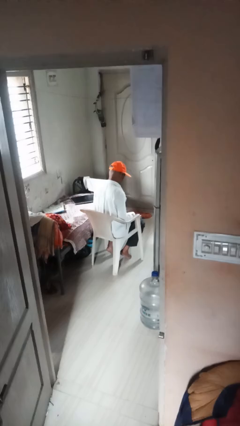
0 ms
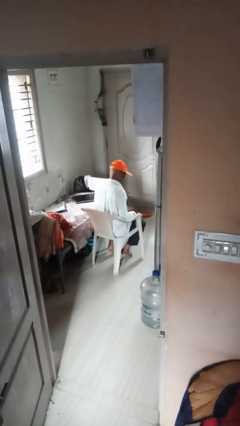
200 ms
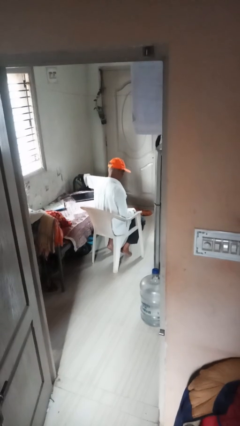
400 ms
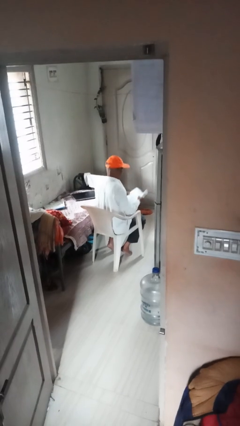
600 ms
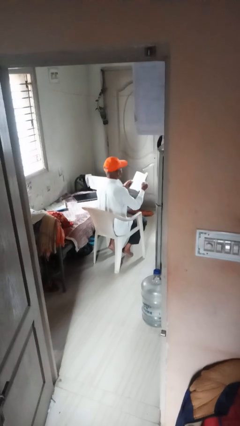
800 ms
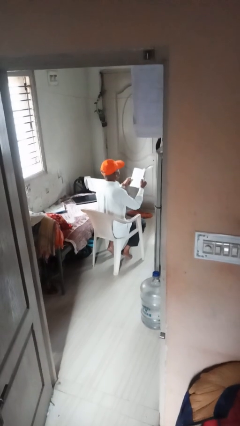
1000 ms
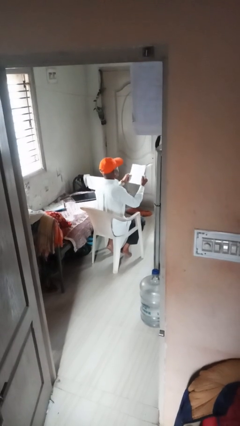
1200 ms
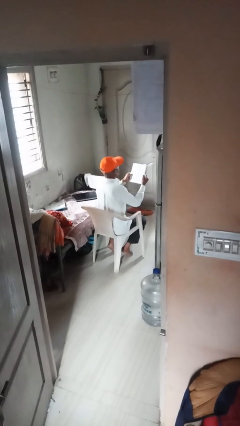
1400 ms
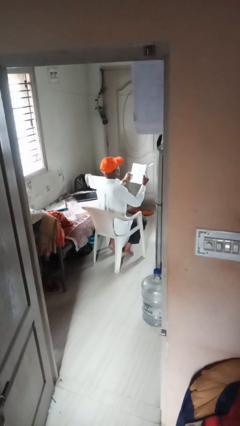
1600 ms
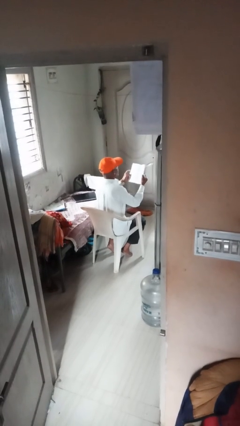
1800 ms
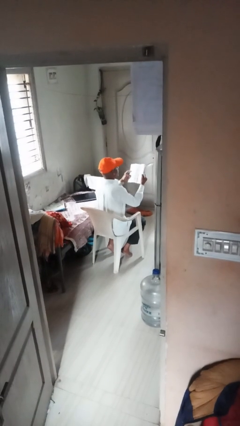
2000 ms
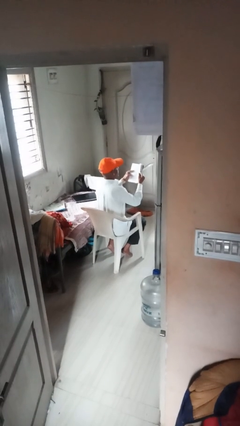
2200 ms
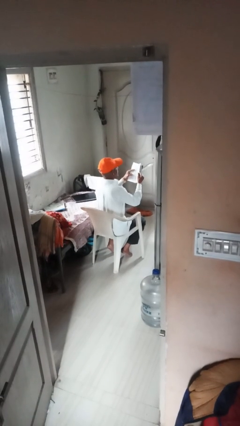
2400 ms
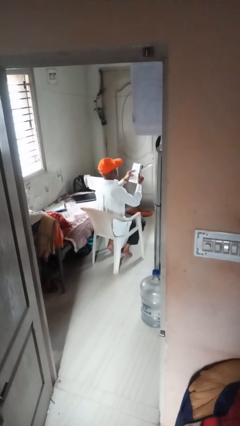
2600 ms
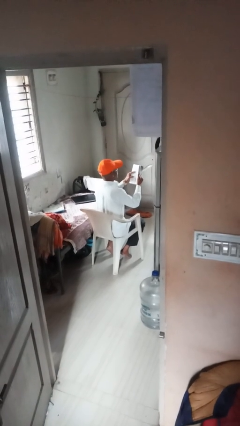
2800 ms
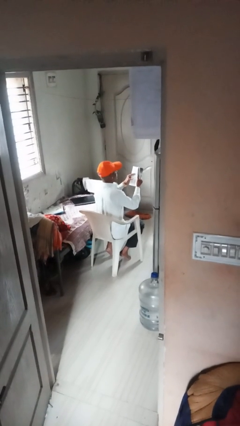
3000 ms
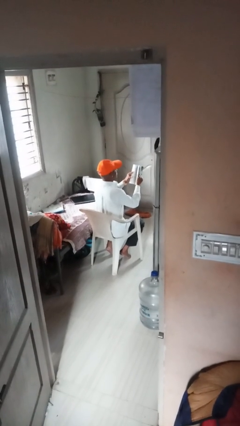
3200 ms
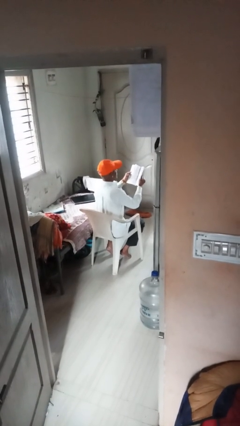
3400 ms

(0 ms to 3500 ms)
person reads book

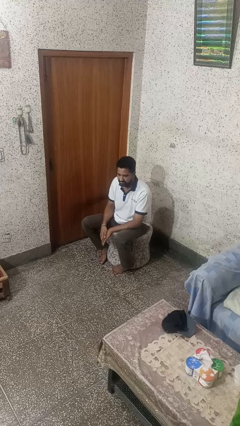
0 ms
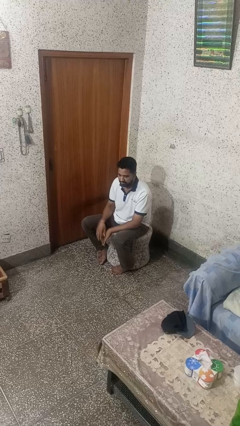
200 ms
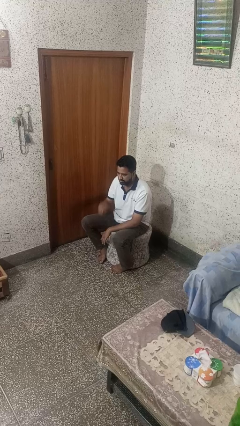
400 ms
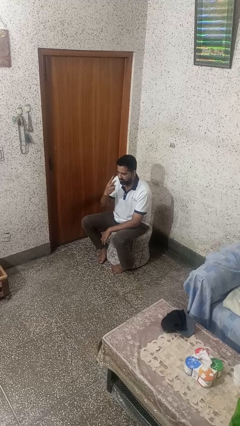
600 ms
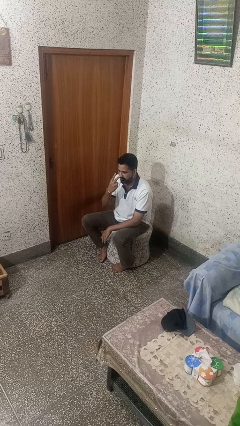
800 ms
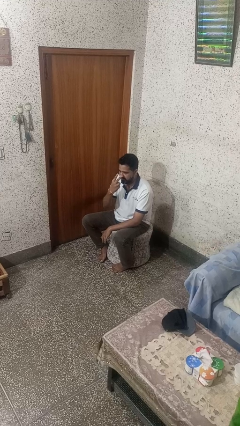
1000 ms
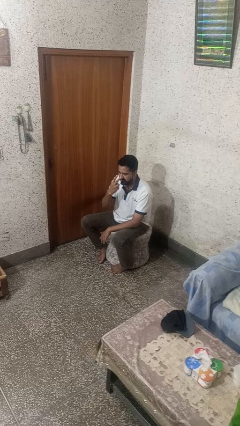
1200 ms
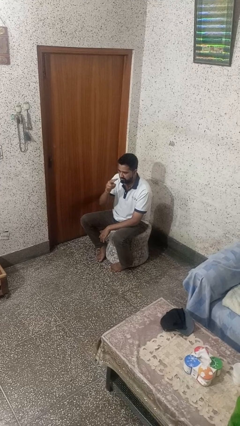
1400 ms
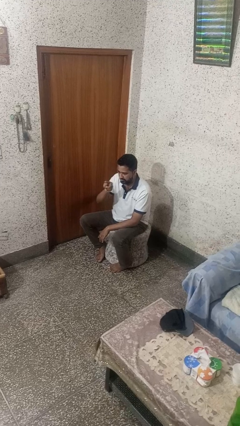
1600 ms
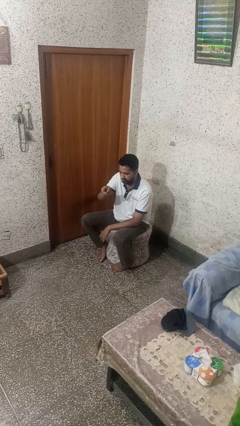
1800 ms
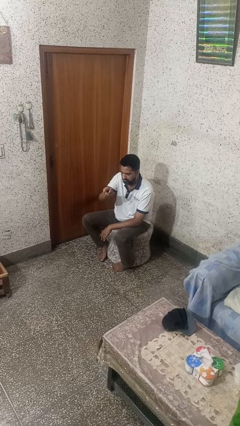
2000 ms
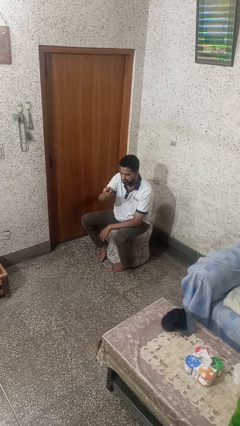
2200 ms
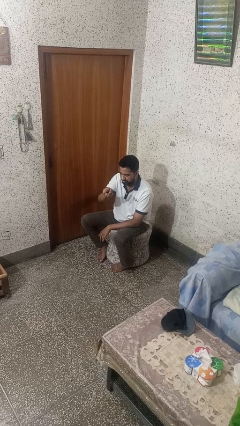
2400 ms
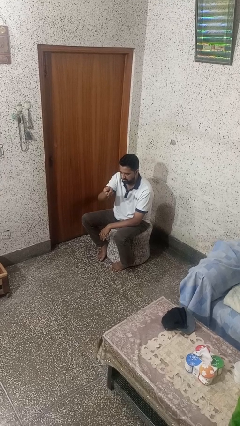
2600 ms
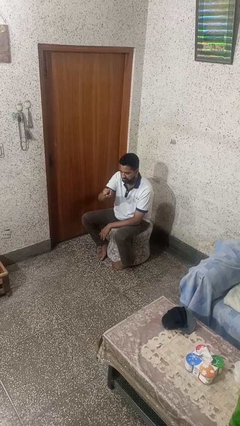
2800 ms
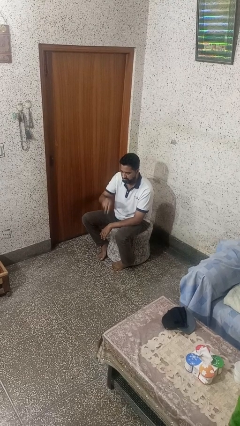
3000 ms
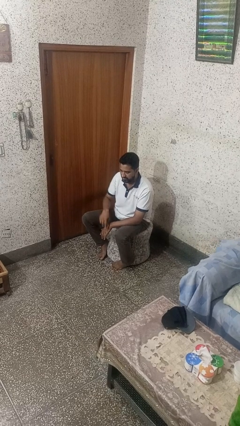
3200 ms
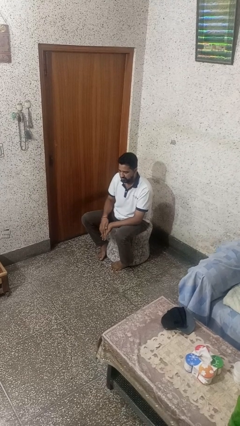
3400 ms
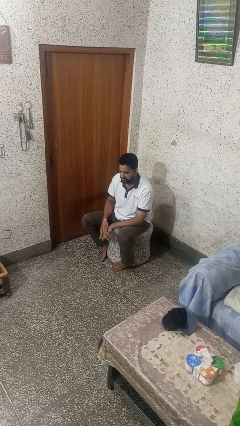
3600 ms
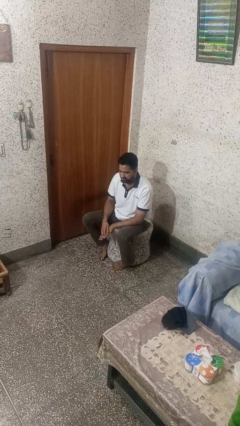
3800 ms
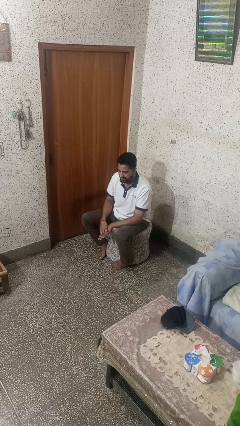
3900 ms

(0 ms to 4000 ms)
person gestures watch closely

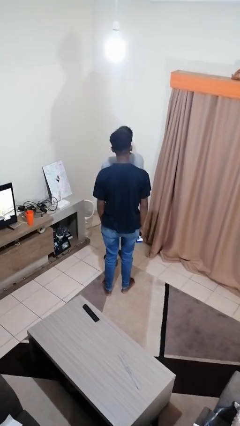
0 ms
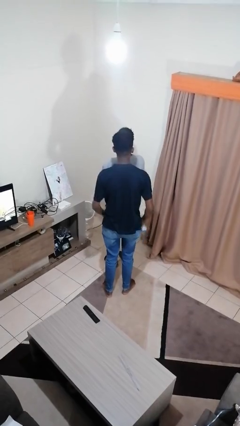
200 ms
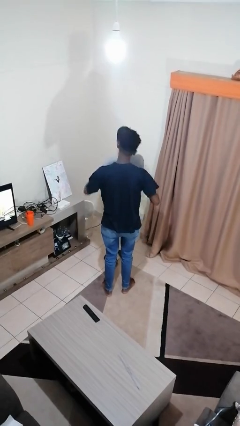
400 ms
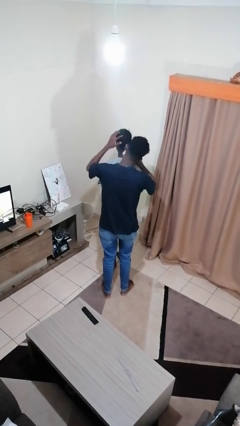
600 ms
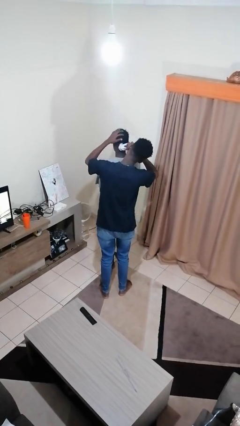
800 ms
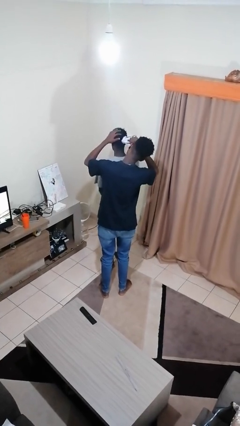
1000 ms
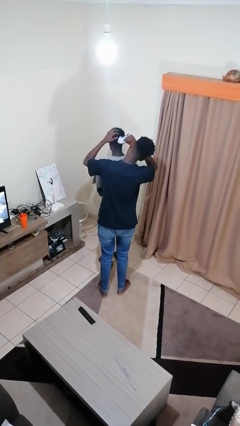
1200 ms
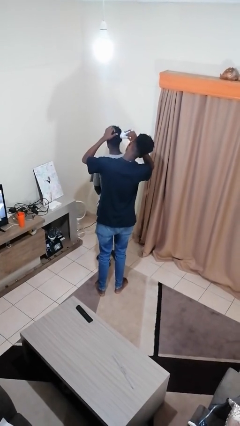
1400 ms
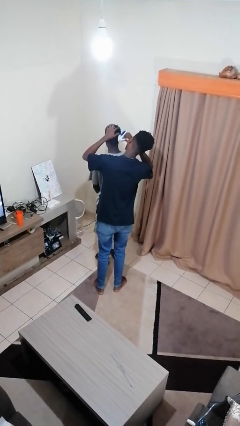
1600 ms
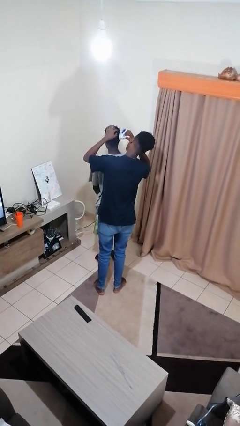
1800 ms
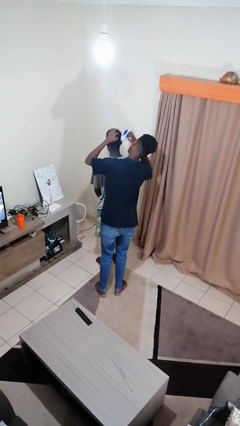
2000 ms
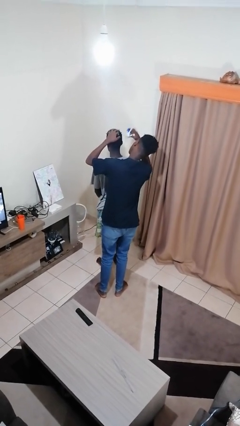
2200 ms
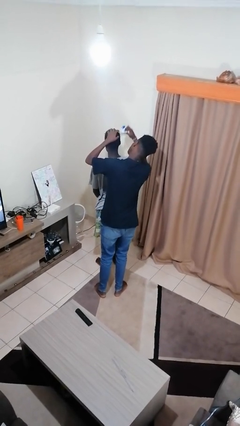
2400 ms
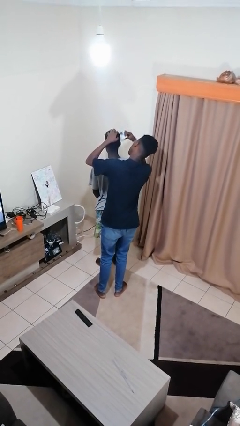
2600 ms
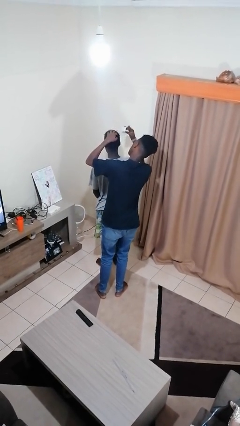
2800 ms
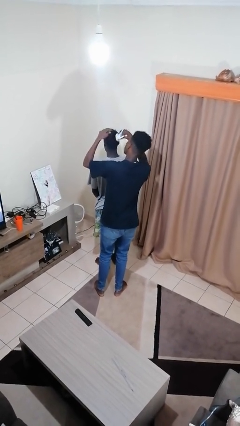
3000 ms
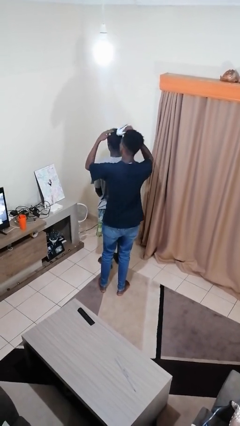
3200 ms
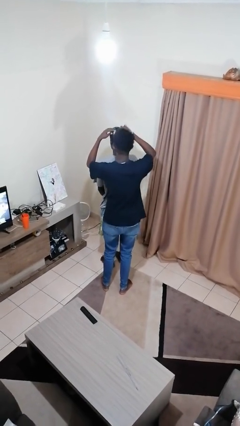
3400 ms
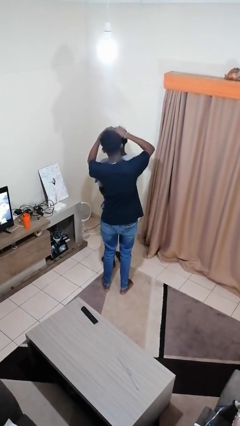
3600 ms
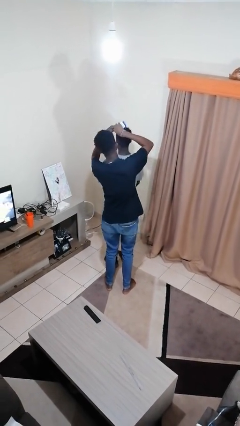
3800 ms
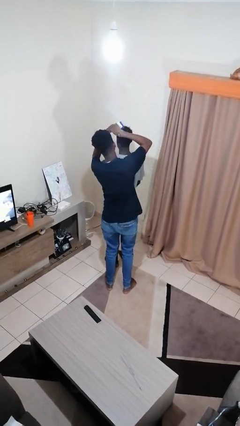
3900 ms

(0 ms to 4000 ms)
person brushes hair of person

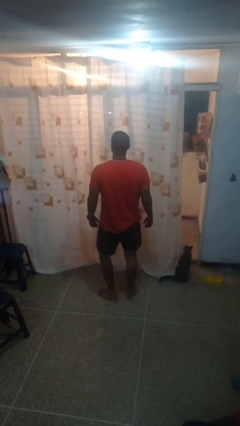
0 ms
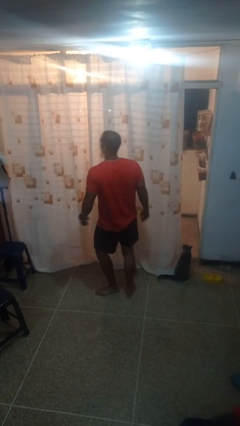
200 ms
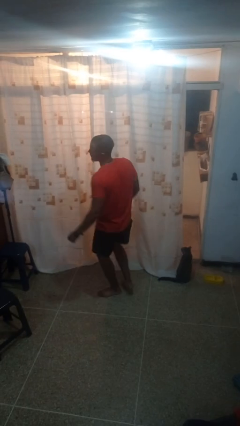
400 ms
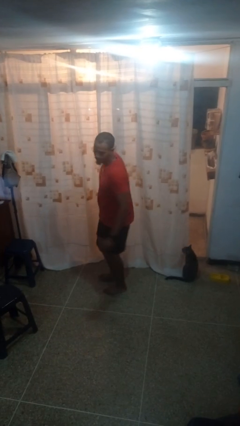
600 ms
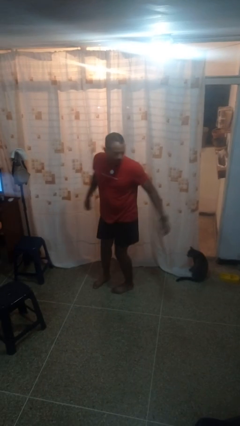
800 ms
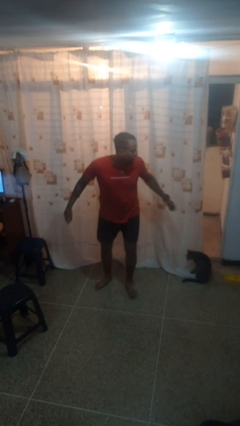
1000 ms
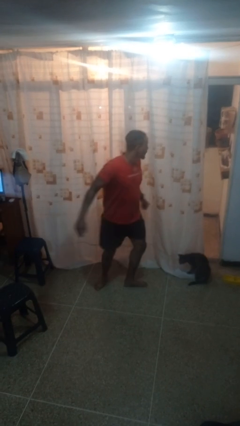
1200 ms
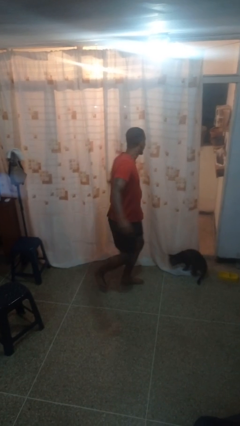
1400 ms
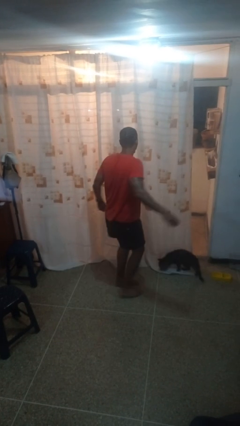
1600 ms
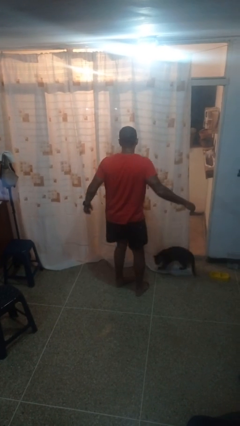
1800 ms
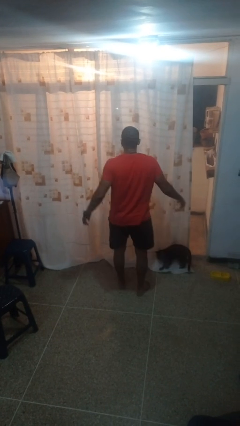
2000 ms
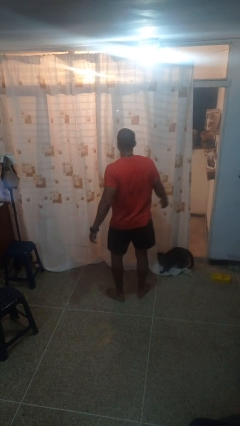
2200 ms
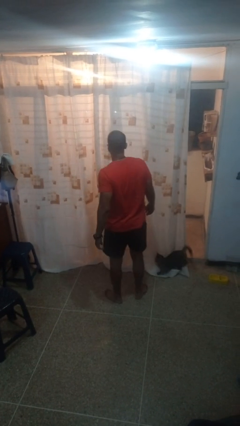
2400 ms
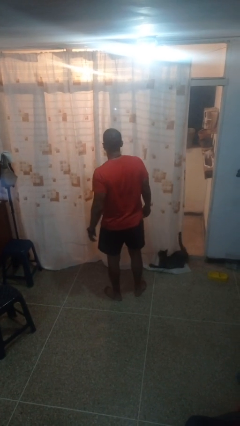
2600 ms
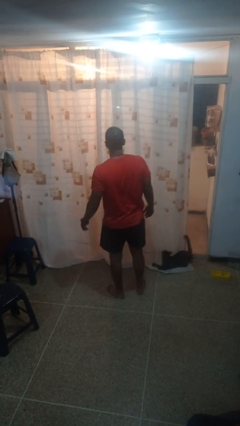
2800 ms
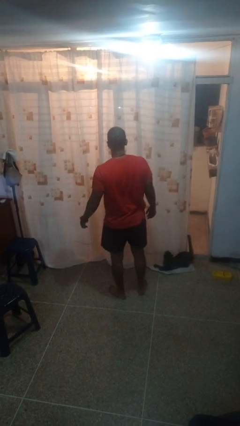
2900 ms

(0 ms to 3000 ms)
person twirls

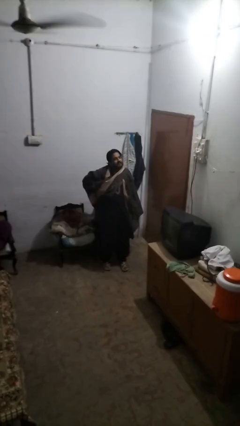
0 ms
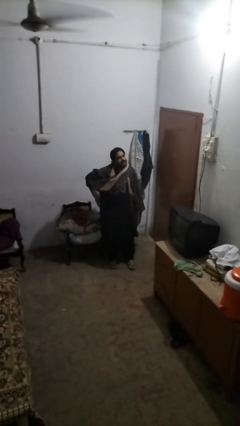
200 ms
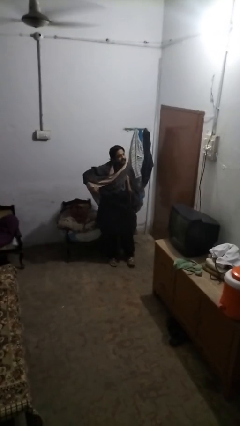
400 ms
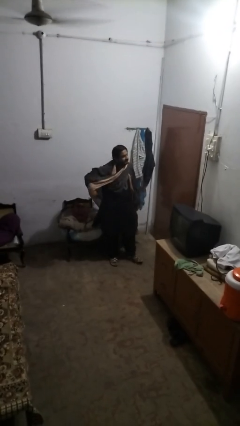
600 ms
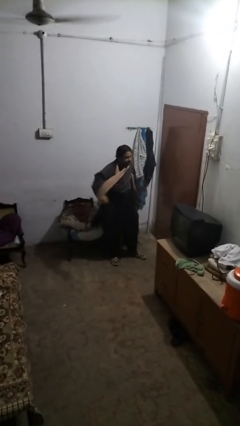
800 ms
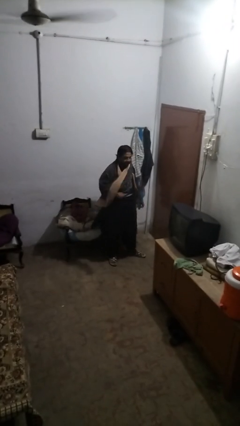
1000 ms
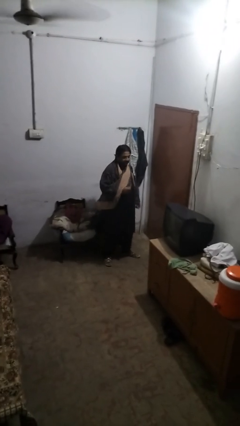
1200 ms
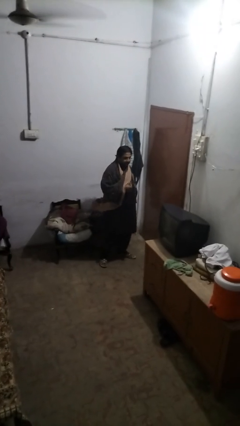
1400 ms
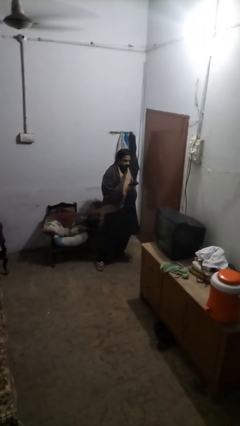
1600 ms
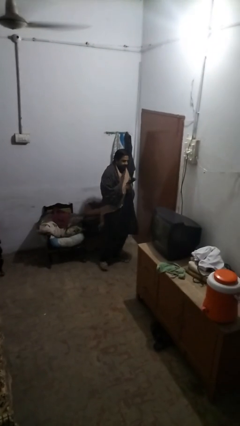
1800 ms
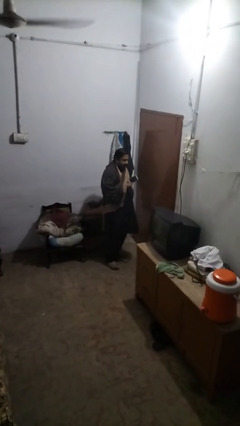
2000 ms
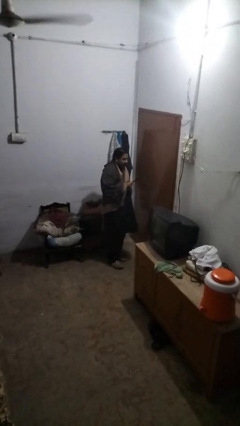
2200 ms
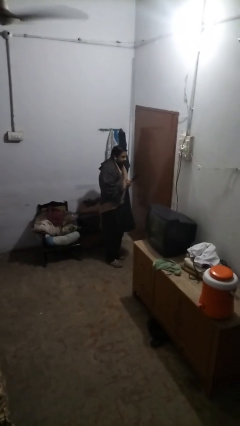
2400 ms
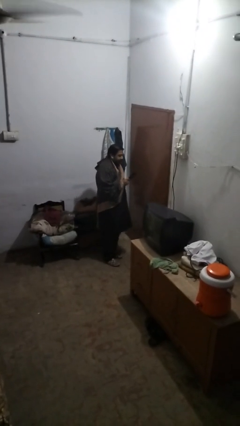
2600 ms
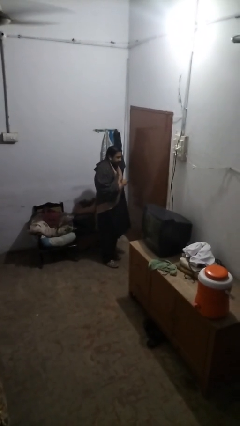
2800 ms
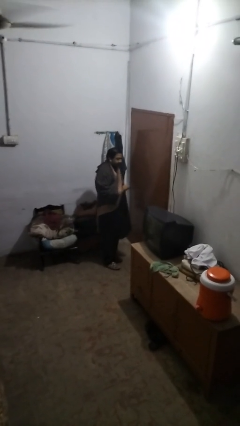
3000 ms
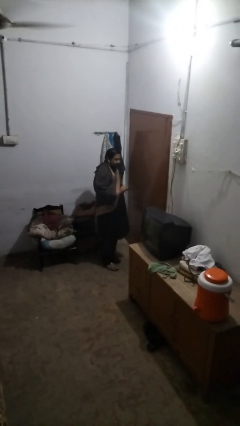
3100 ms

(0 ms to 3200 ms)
person takes phone from pocket

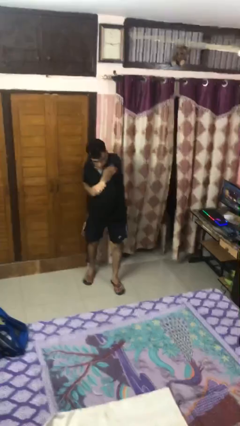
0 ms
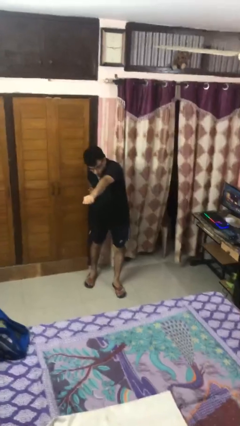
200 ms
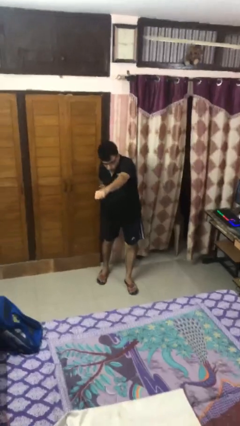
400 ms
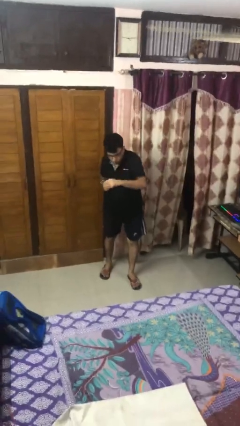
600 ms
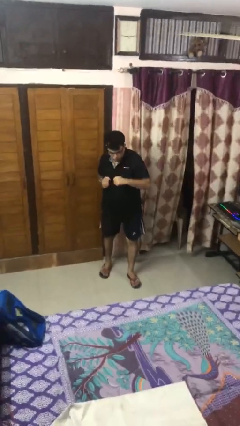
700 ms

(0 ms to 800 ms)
person punches
